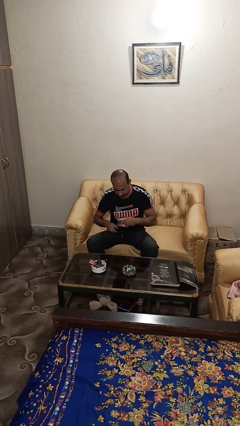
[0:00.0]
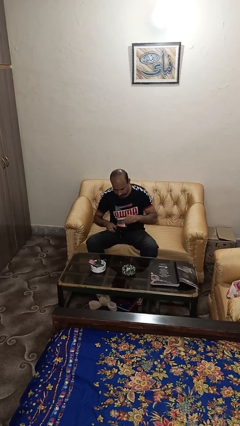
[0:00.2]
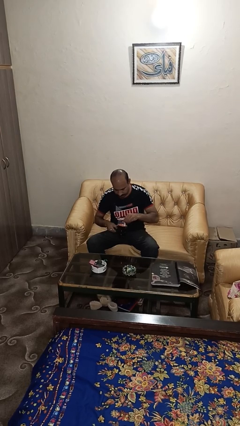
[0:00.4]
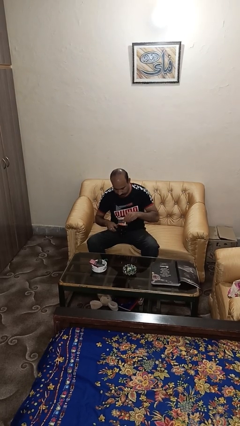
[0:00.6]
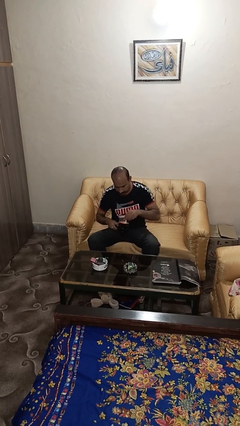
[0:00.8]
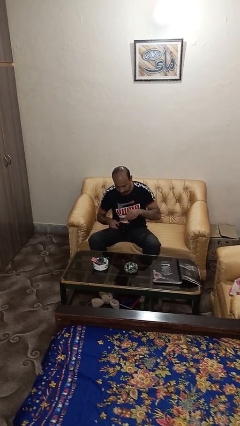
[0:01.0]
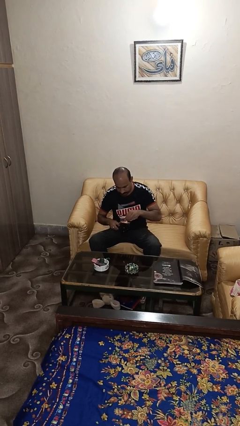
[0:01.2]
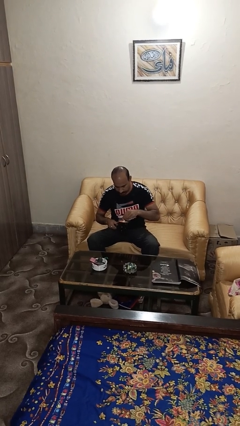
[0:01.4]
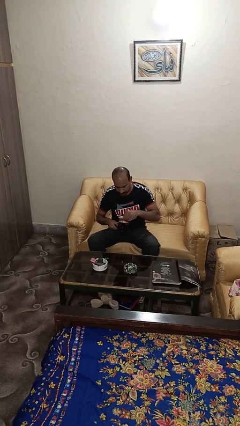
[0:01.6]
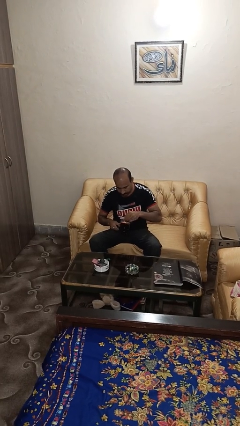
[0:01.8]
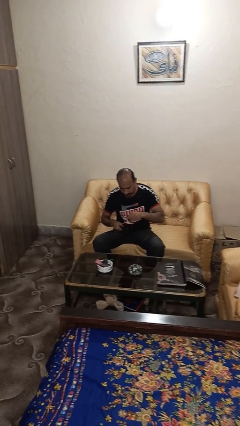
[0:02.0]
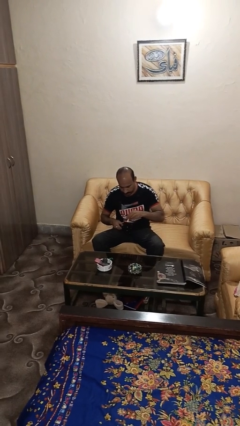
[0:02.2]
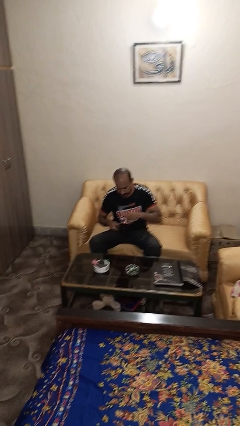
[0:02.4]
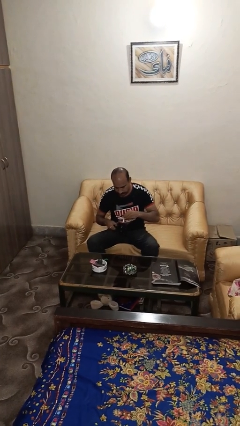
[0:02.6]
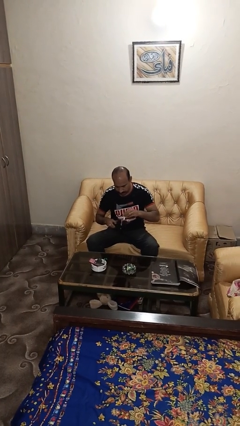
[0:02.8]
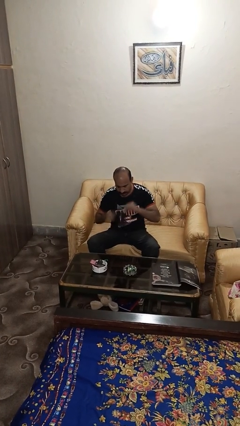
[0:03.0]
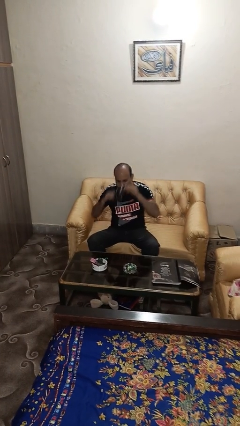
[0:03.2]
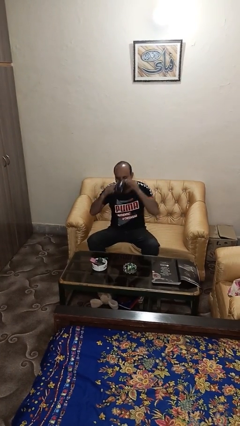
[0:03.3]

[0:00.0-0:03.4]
person stirs mug

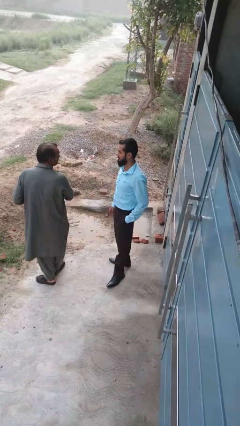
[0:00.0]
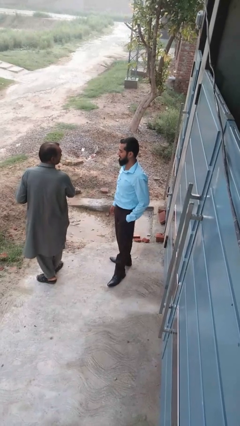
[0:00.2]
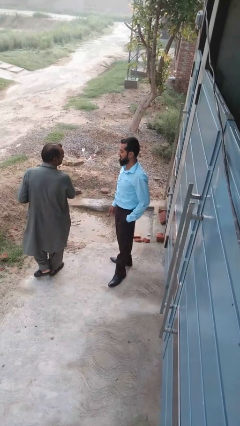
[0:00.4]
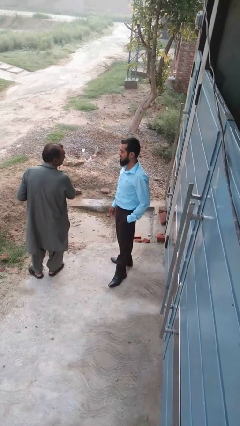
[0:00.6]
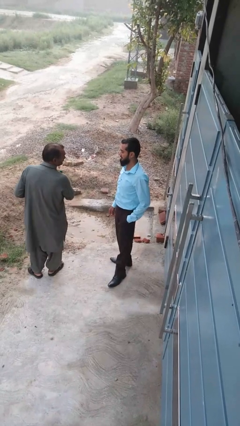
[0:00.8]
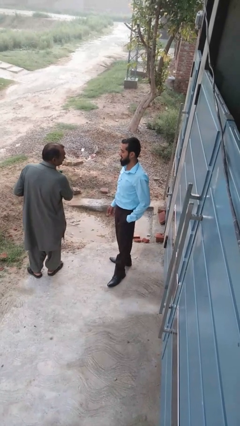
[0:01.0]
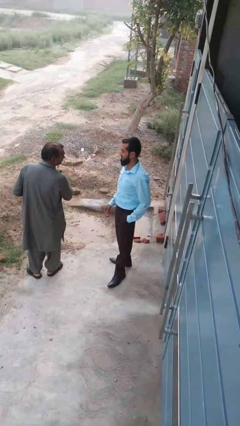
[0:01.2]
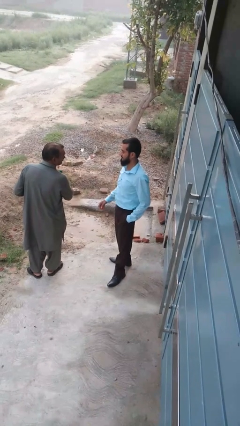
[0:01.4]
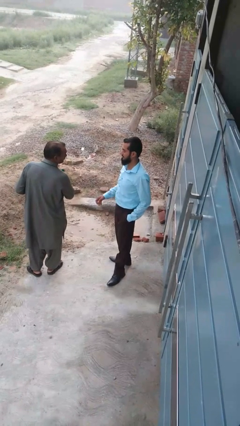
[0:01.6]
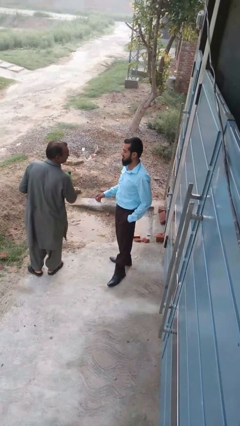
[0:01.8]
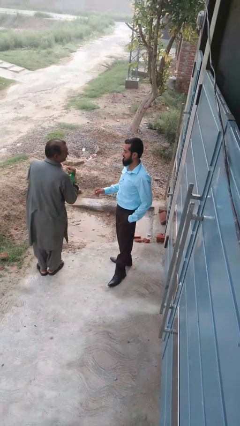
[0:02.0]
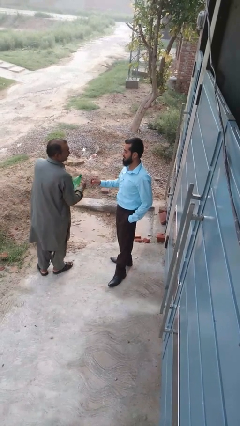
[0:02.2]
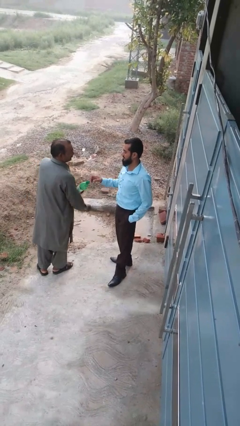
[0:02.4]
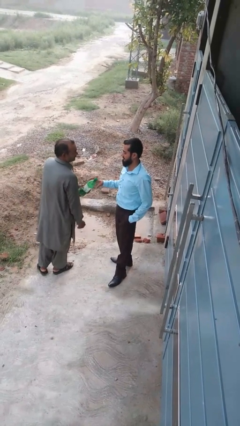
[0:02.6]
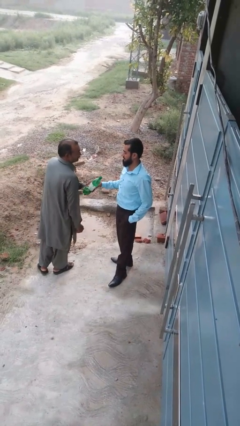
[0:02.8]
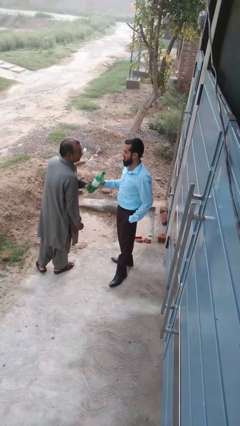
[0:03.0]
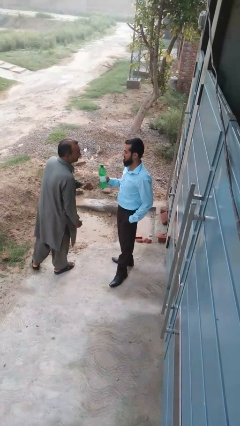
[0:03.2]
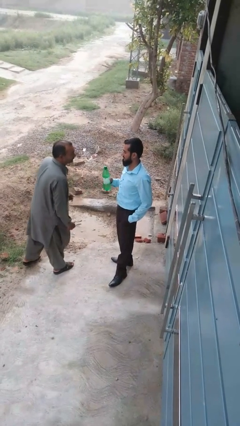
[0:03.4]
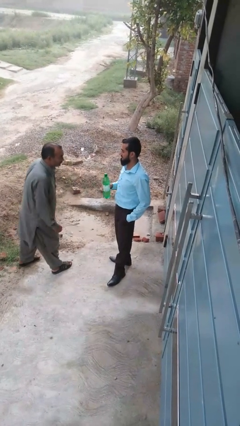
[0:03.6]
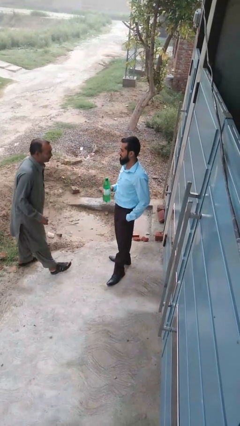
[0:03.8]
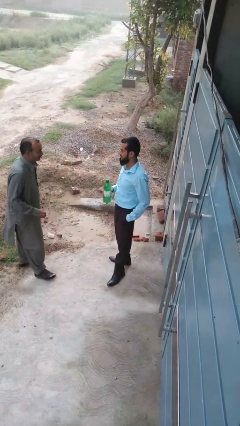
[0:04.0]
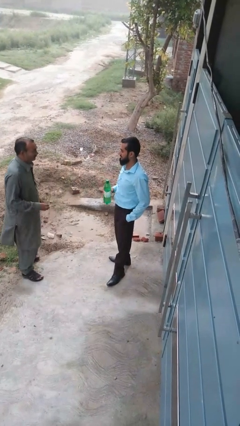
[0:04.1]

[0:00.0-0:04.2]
person transfers object to person

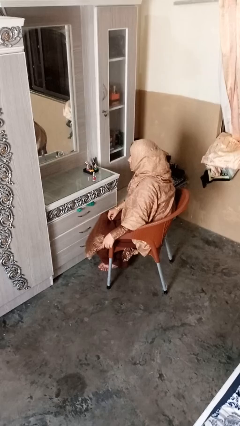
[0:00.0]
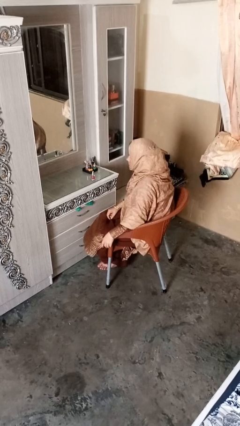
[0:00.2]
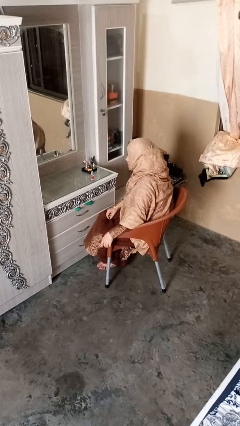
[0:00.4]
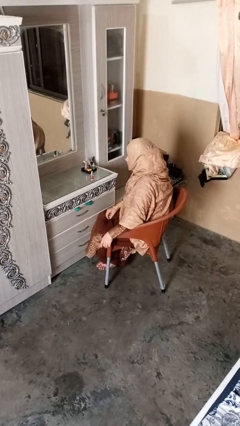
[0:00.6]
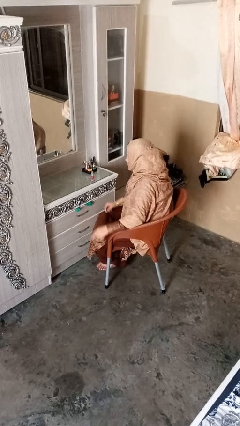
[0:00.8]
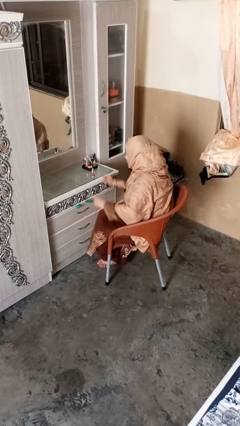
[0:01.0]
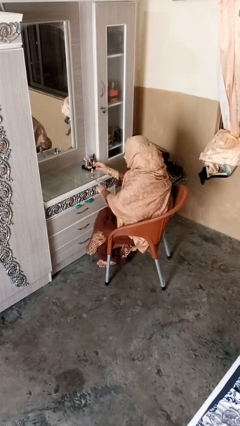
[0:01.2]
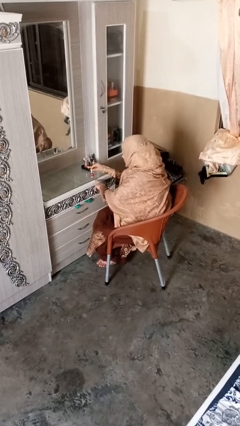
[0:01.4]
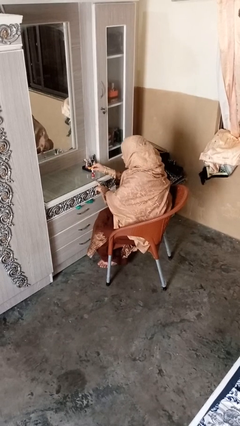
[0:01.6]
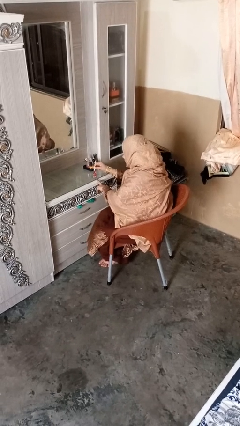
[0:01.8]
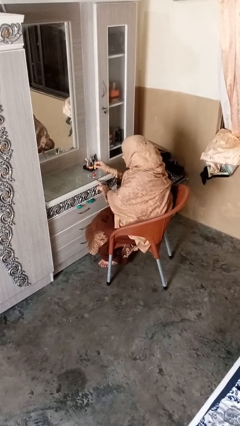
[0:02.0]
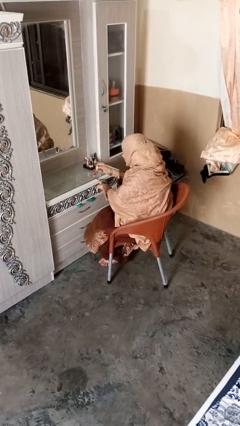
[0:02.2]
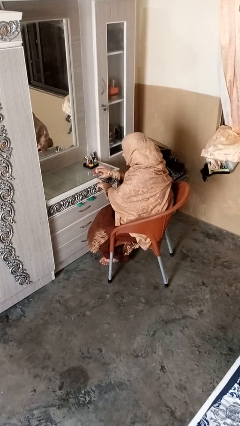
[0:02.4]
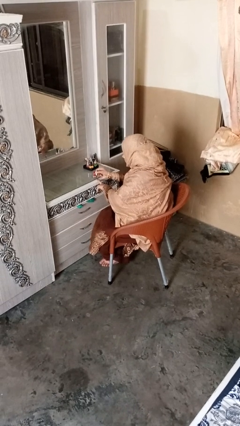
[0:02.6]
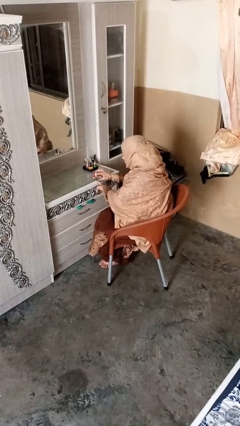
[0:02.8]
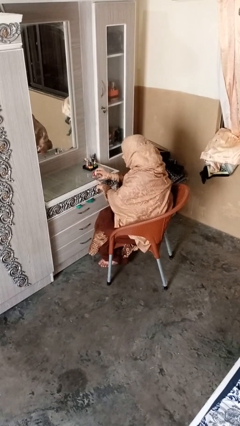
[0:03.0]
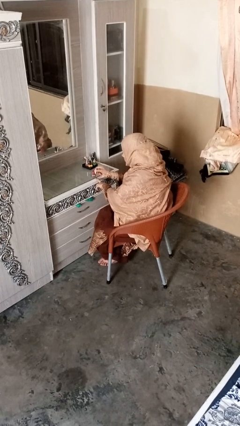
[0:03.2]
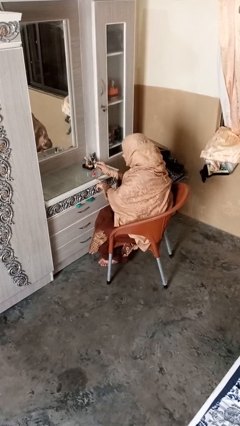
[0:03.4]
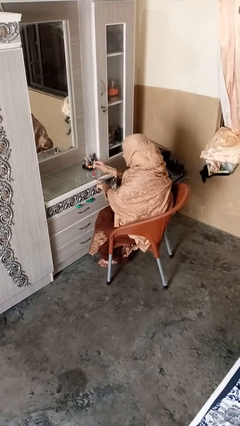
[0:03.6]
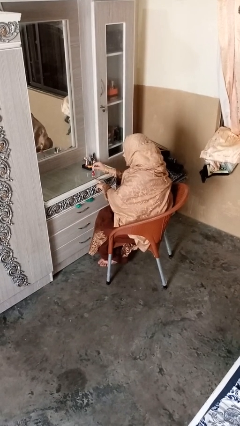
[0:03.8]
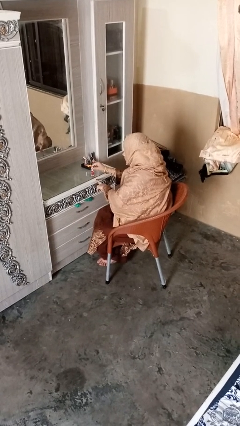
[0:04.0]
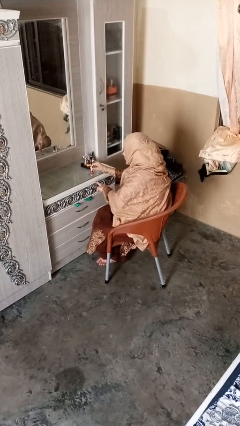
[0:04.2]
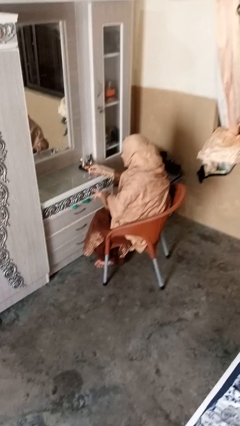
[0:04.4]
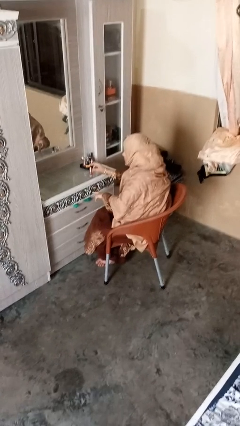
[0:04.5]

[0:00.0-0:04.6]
person paints fingernails

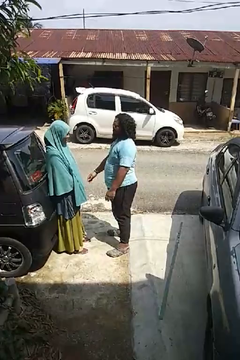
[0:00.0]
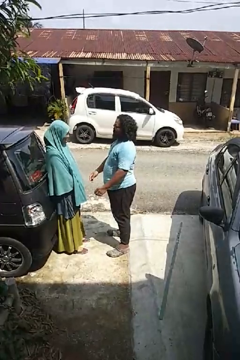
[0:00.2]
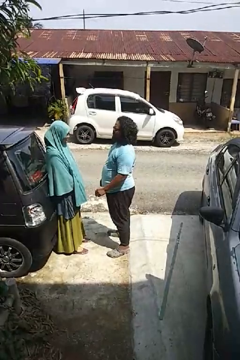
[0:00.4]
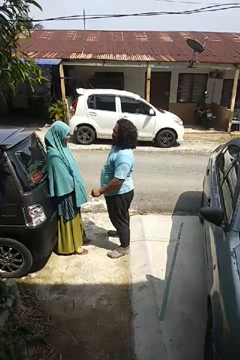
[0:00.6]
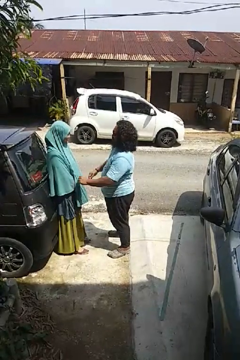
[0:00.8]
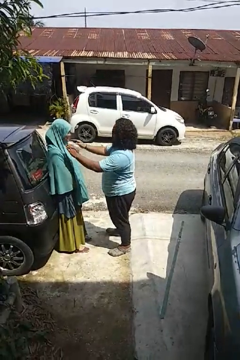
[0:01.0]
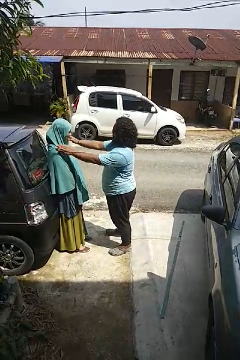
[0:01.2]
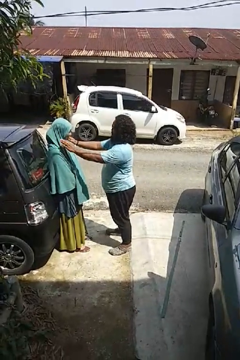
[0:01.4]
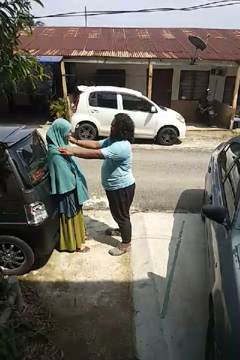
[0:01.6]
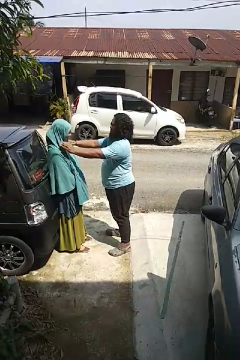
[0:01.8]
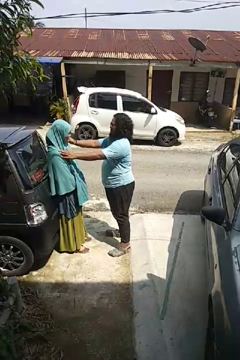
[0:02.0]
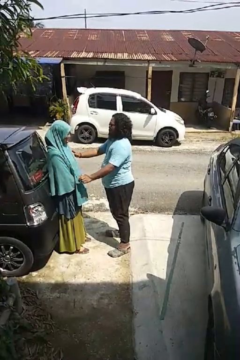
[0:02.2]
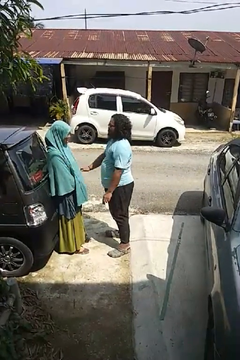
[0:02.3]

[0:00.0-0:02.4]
person pounds shoulders of person

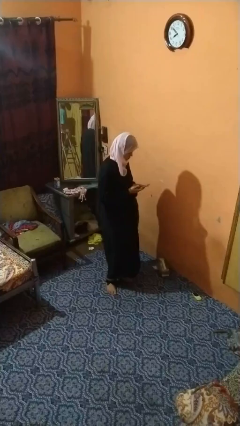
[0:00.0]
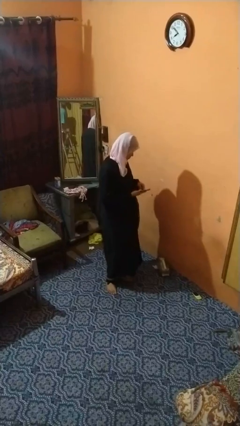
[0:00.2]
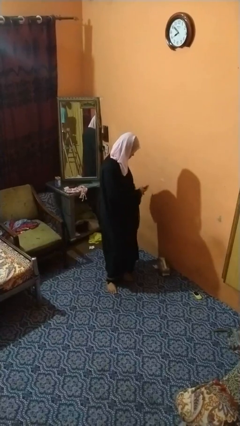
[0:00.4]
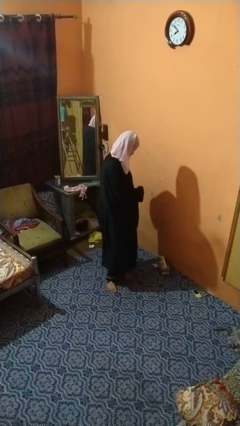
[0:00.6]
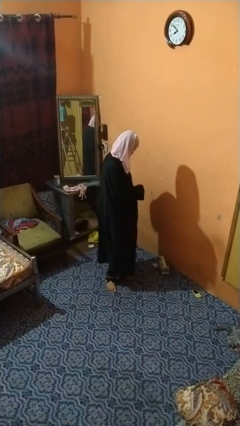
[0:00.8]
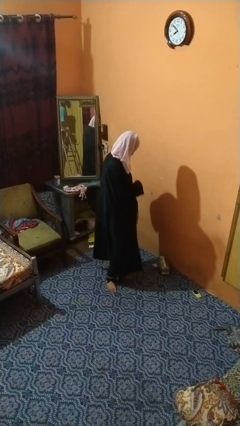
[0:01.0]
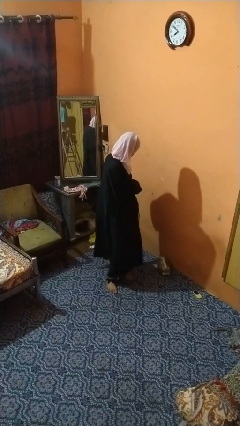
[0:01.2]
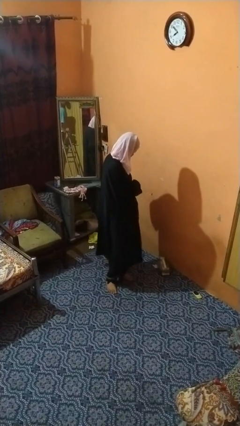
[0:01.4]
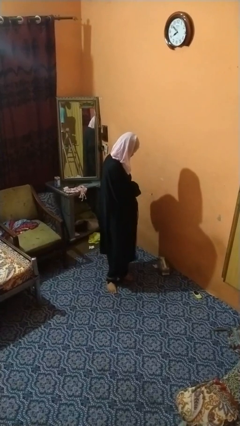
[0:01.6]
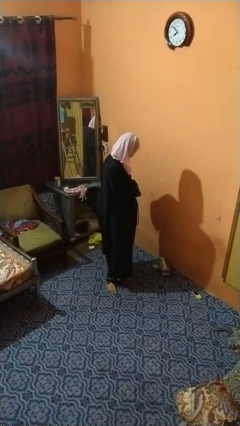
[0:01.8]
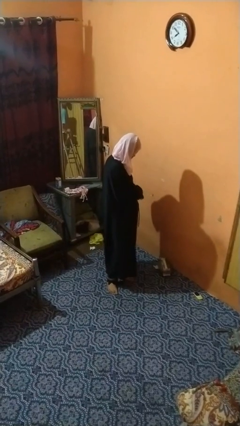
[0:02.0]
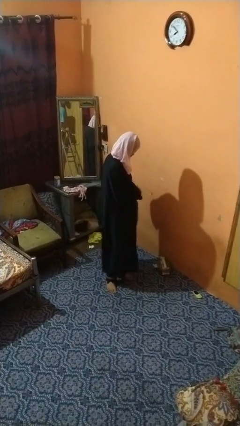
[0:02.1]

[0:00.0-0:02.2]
person puts phone into pocket

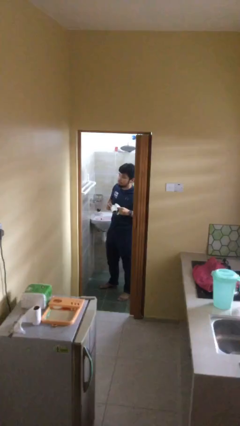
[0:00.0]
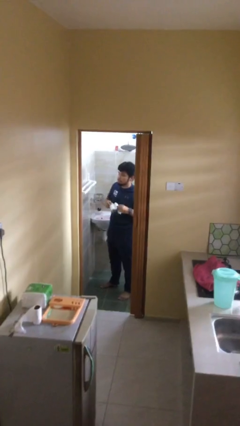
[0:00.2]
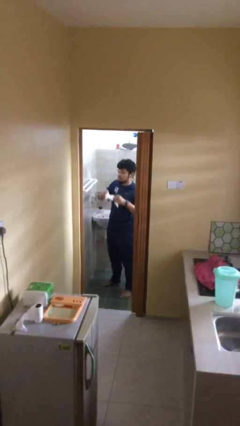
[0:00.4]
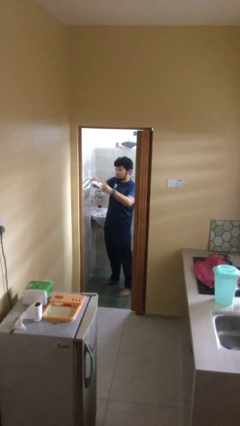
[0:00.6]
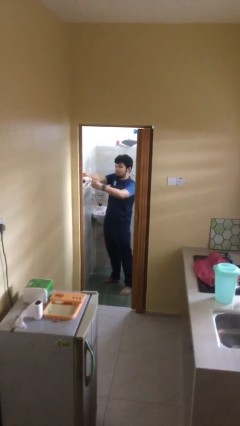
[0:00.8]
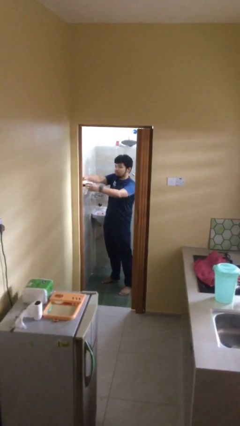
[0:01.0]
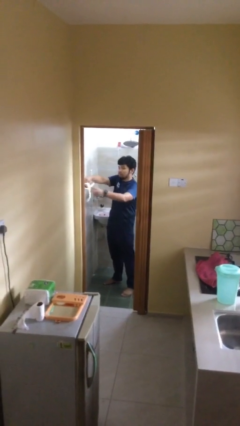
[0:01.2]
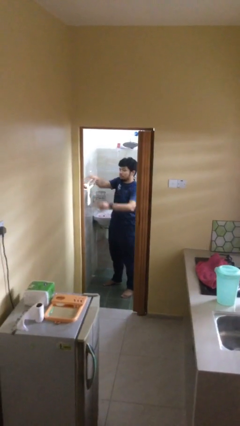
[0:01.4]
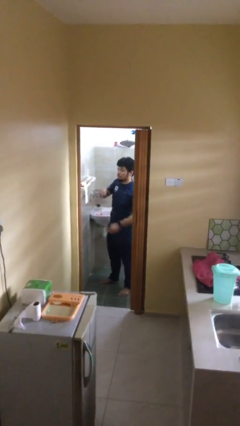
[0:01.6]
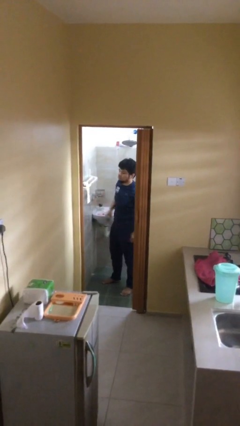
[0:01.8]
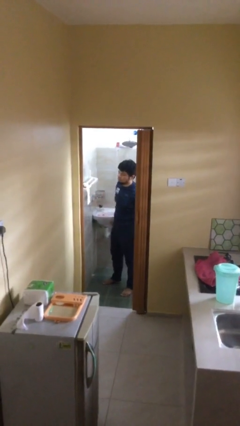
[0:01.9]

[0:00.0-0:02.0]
person puts down object on countertop
